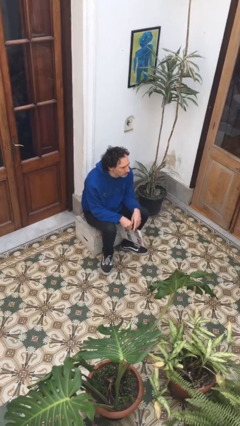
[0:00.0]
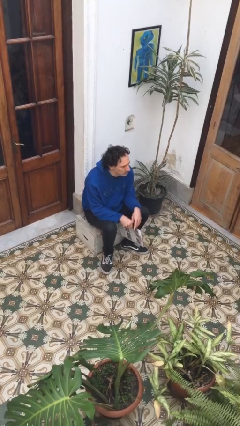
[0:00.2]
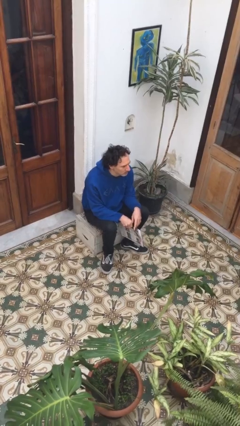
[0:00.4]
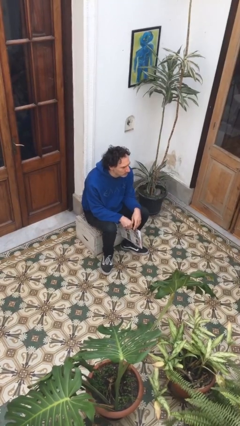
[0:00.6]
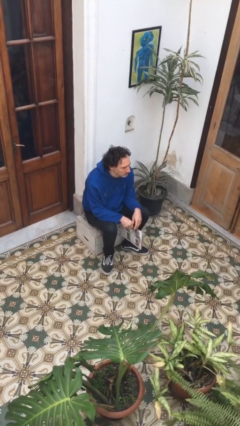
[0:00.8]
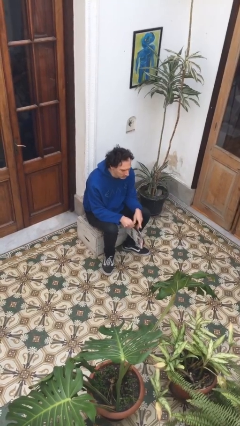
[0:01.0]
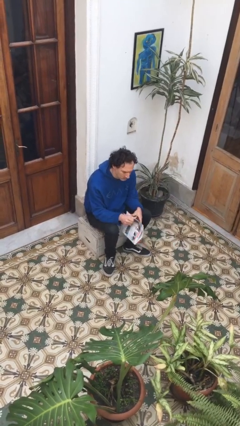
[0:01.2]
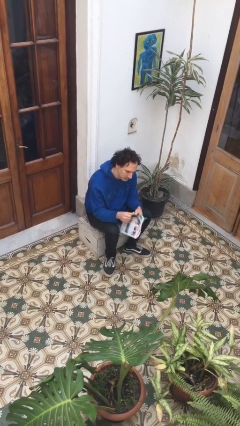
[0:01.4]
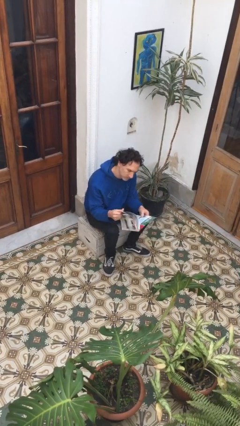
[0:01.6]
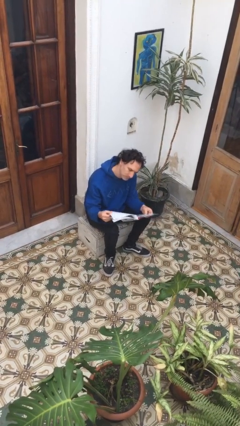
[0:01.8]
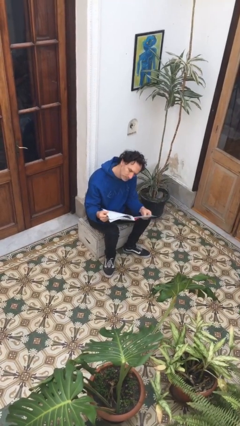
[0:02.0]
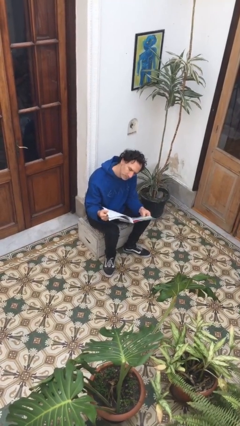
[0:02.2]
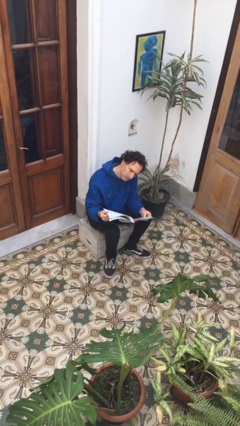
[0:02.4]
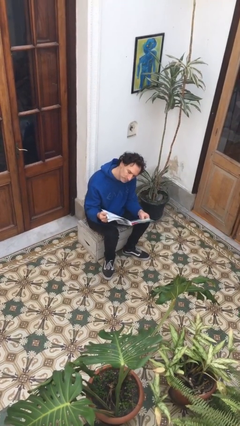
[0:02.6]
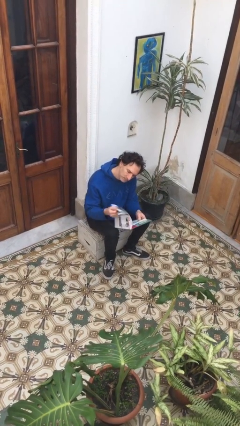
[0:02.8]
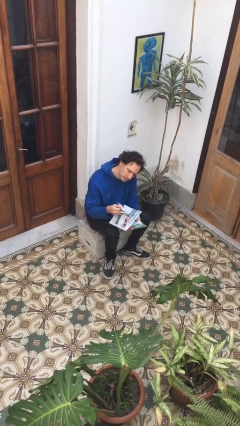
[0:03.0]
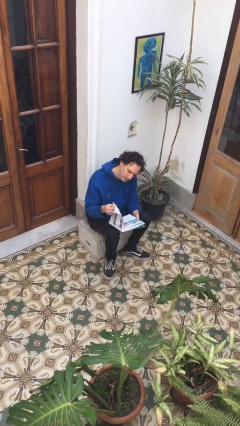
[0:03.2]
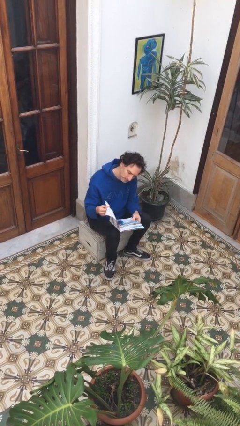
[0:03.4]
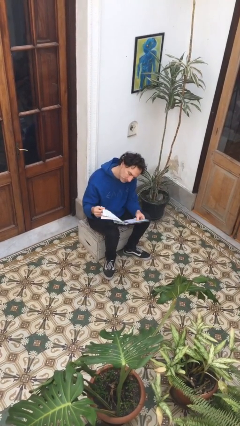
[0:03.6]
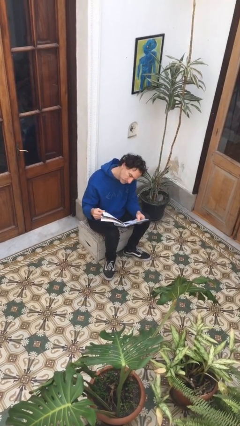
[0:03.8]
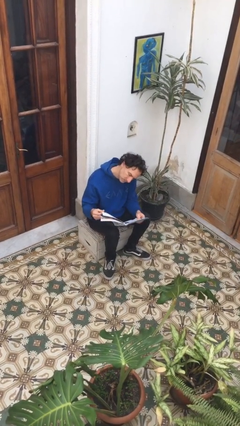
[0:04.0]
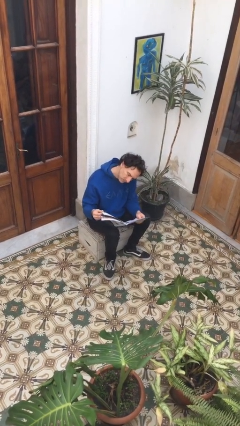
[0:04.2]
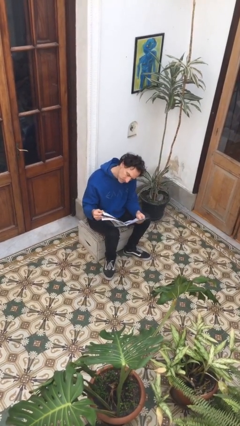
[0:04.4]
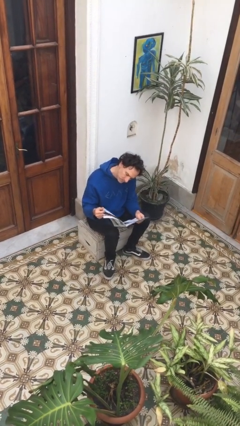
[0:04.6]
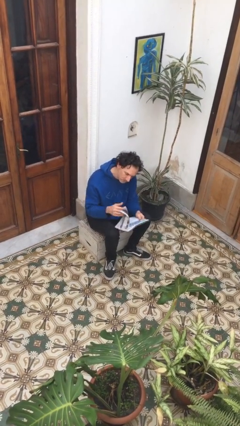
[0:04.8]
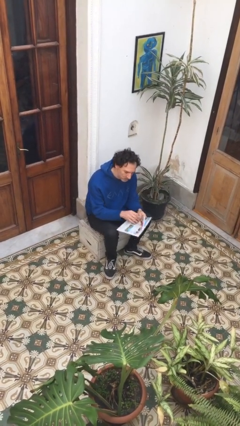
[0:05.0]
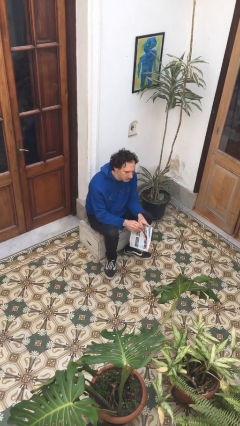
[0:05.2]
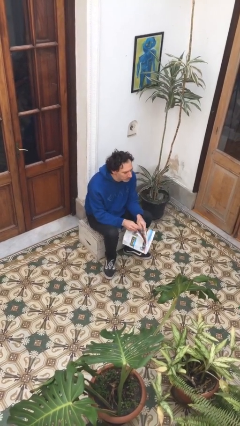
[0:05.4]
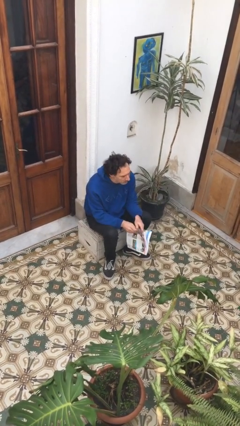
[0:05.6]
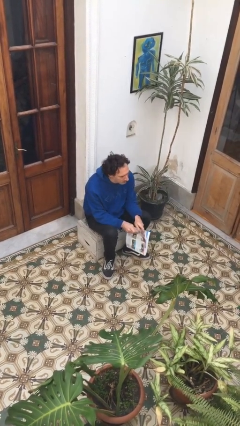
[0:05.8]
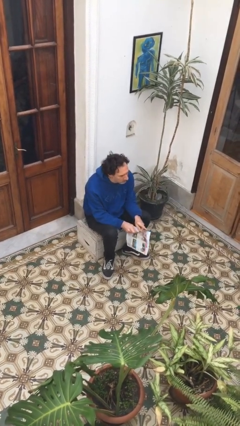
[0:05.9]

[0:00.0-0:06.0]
person reads magazine

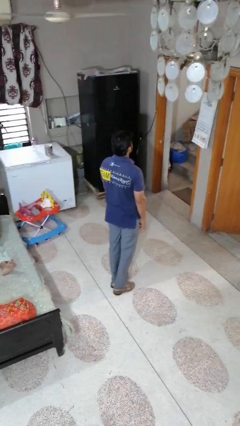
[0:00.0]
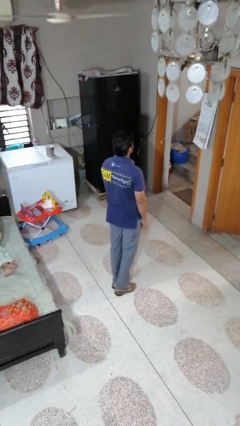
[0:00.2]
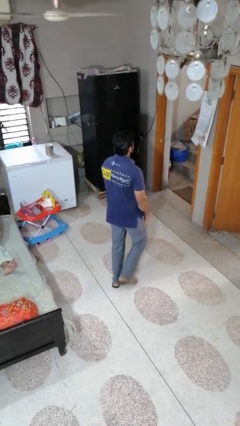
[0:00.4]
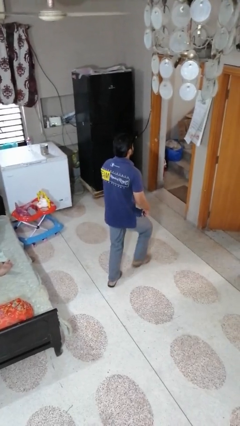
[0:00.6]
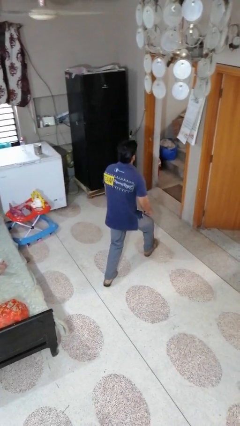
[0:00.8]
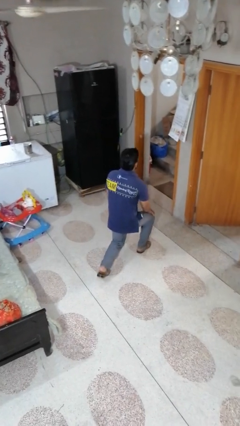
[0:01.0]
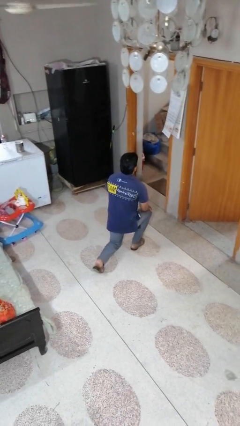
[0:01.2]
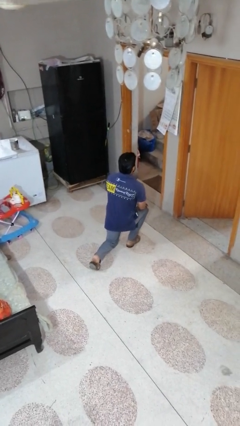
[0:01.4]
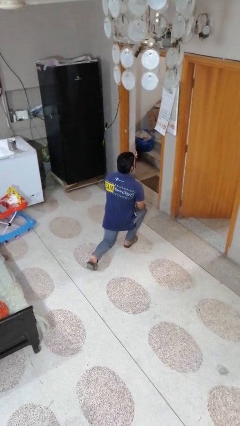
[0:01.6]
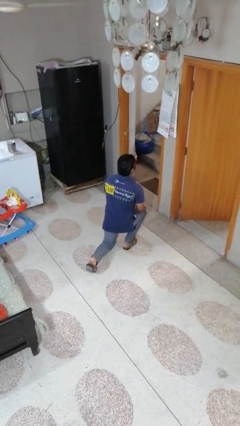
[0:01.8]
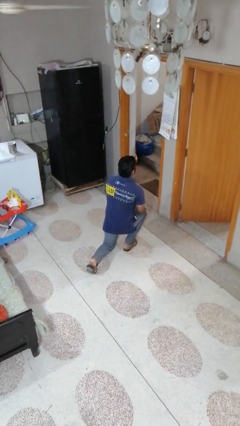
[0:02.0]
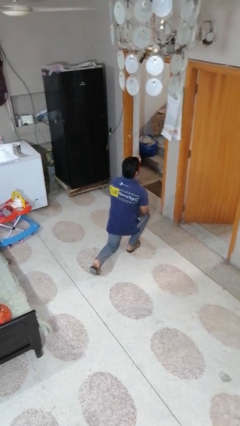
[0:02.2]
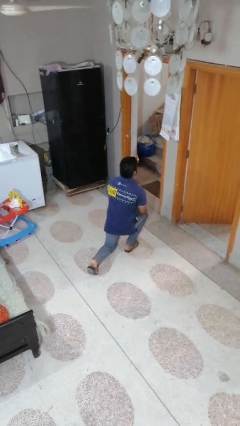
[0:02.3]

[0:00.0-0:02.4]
person kneels

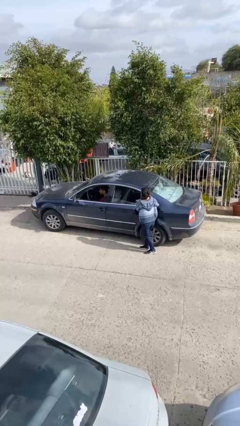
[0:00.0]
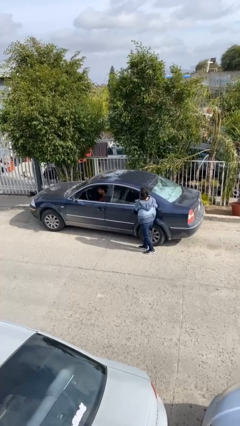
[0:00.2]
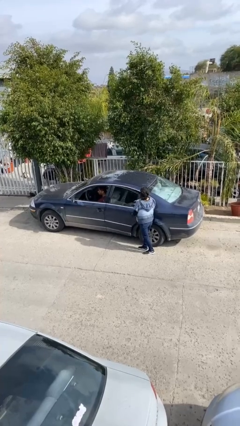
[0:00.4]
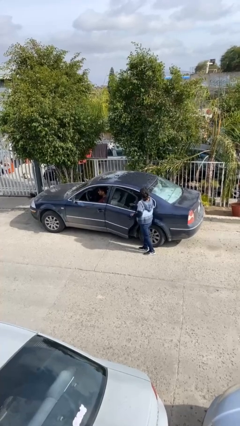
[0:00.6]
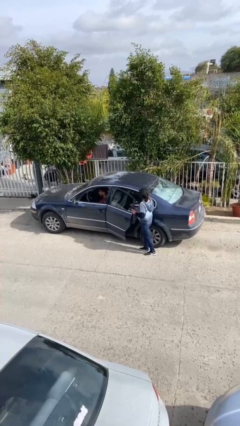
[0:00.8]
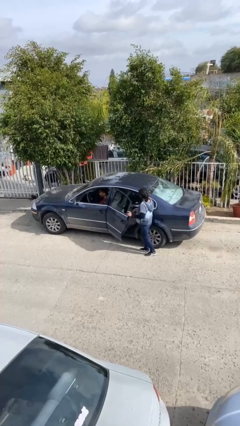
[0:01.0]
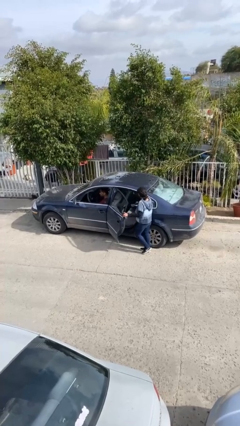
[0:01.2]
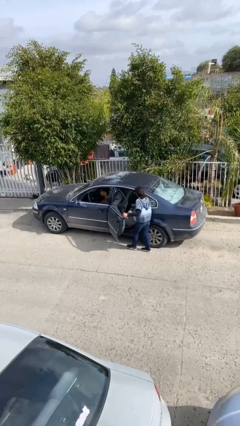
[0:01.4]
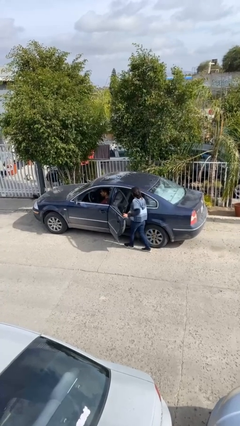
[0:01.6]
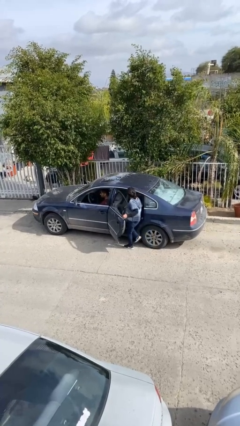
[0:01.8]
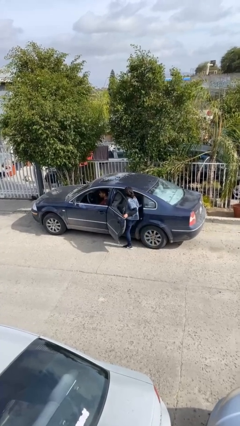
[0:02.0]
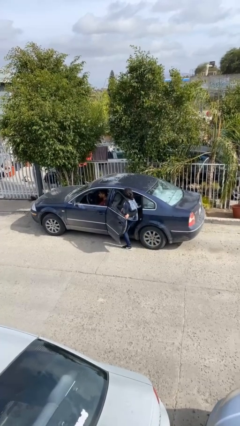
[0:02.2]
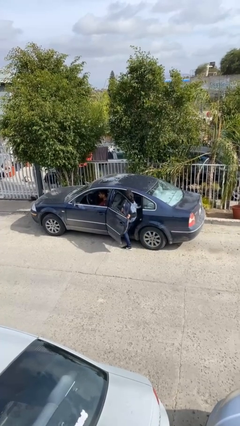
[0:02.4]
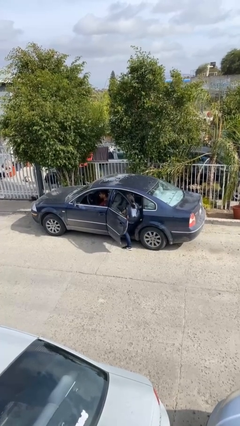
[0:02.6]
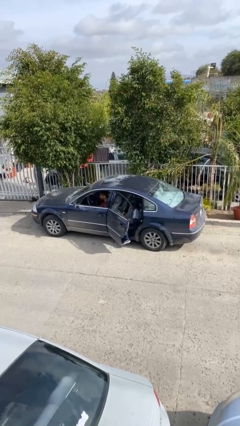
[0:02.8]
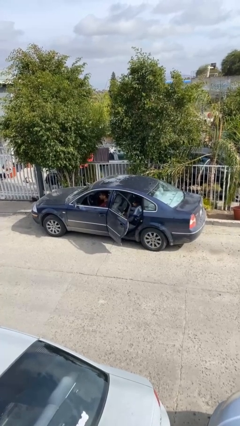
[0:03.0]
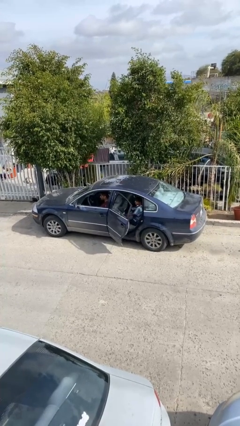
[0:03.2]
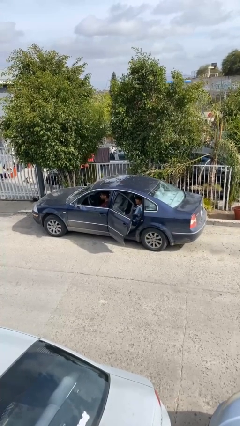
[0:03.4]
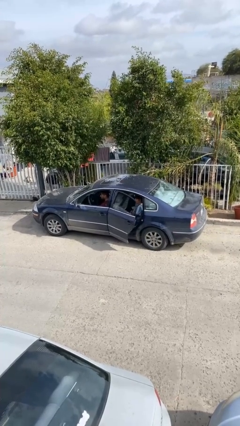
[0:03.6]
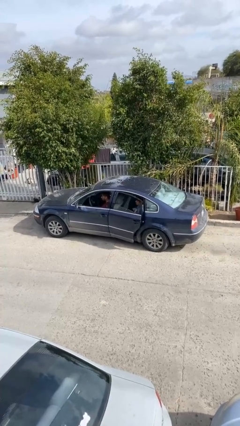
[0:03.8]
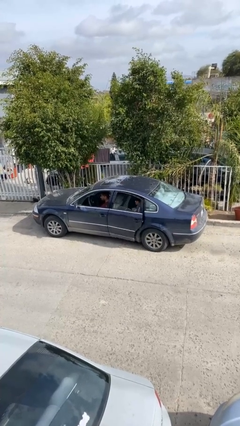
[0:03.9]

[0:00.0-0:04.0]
car picks up person

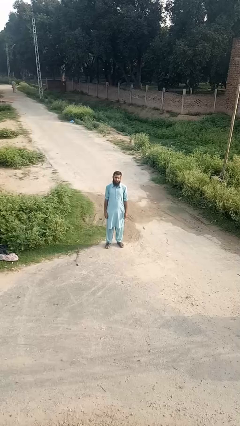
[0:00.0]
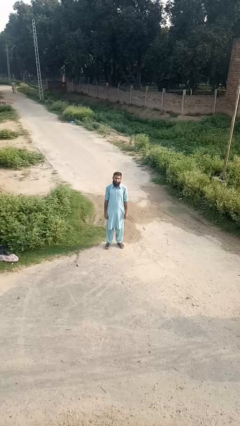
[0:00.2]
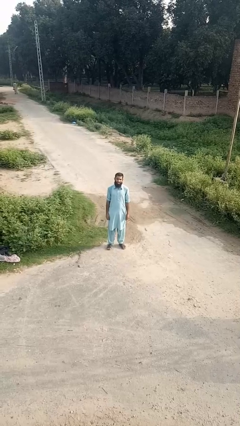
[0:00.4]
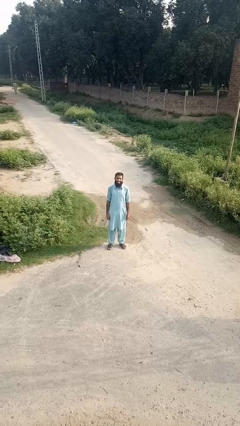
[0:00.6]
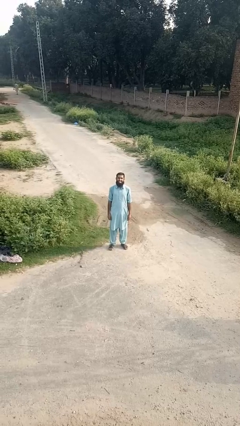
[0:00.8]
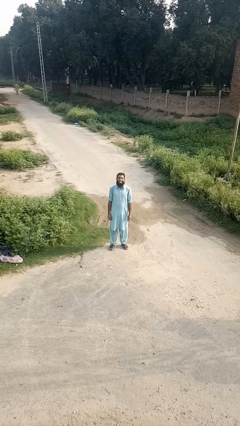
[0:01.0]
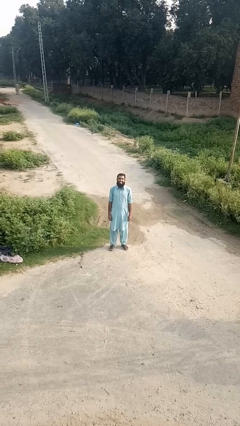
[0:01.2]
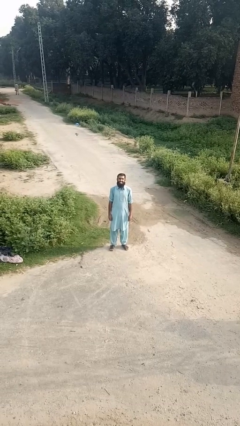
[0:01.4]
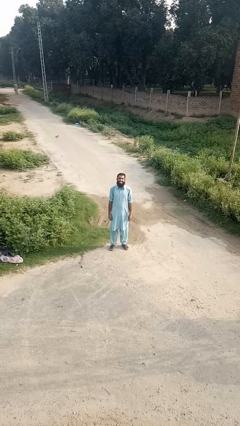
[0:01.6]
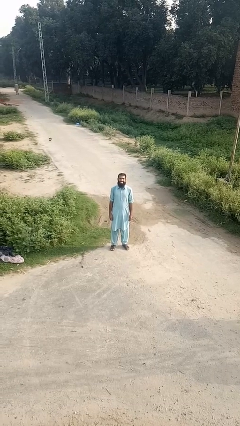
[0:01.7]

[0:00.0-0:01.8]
person flosses

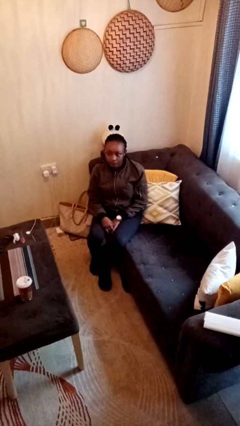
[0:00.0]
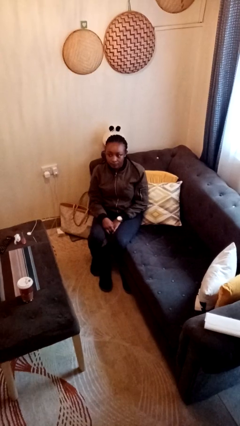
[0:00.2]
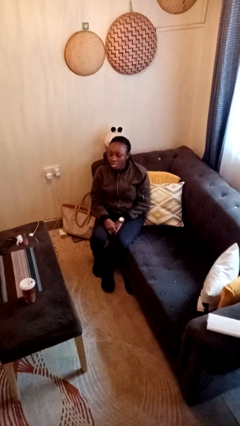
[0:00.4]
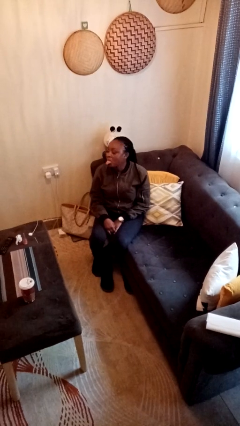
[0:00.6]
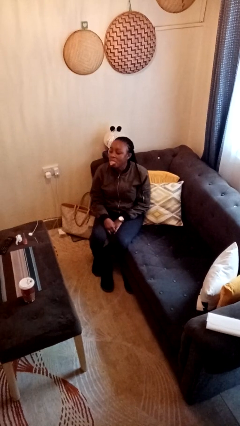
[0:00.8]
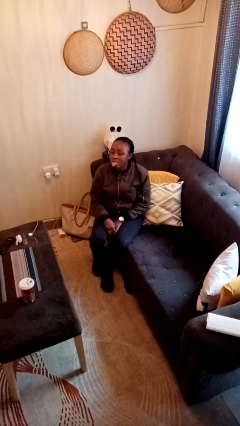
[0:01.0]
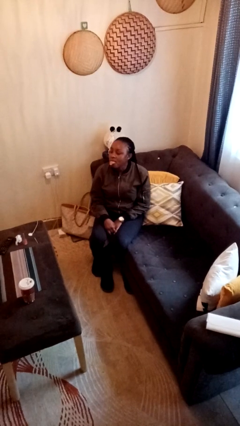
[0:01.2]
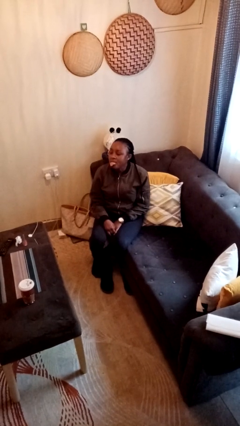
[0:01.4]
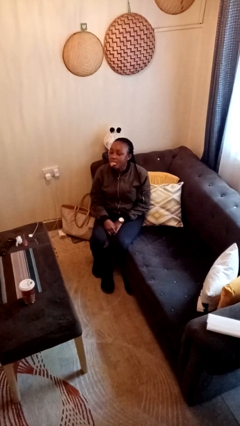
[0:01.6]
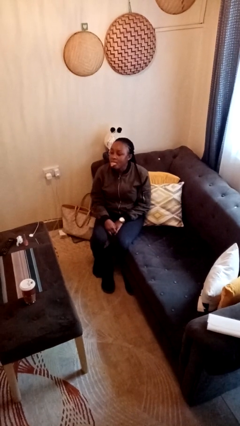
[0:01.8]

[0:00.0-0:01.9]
person sticks out tongue

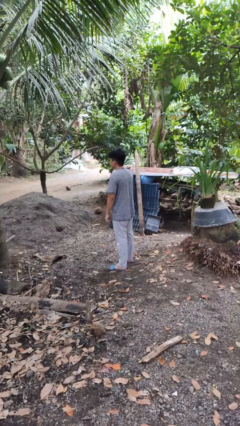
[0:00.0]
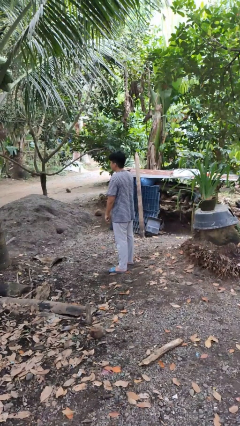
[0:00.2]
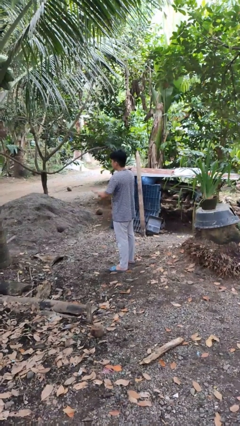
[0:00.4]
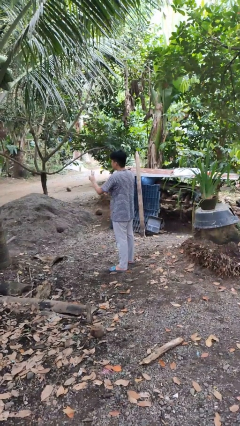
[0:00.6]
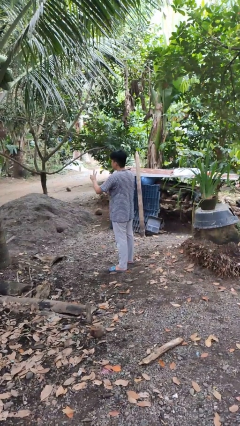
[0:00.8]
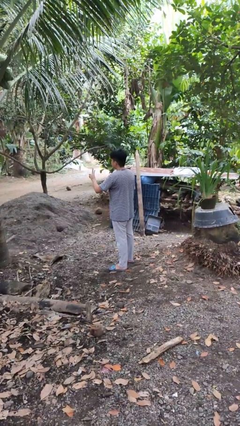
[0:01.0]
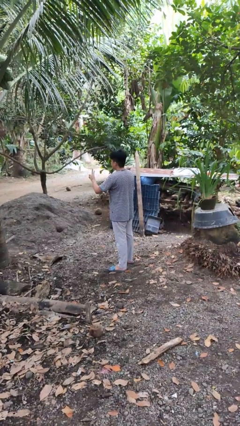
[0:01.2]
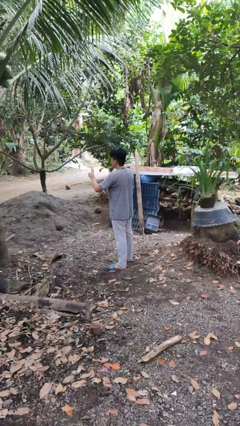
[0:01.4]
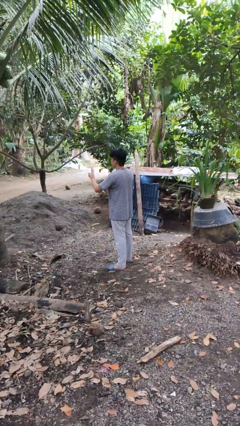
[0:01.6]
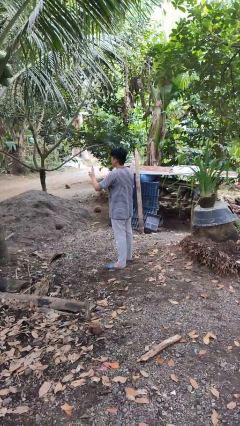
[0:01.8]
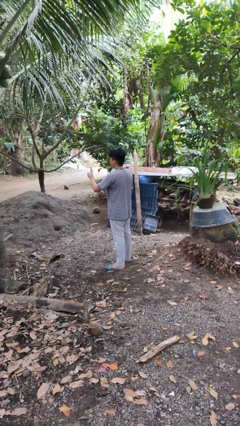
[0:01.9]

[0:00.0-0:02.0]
person gestures peace
